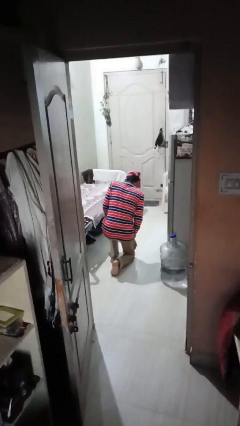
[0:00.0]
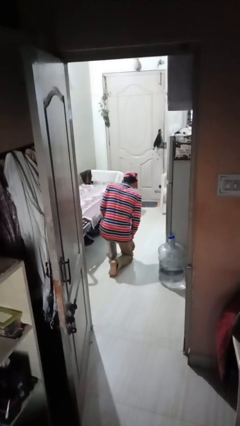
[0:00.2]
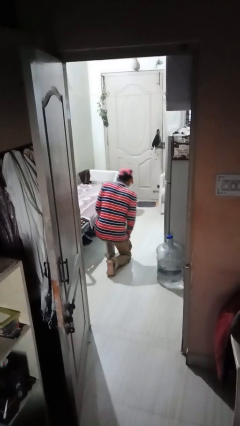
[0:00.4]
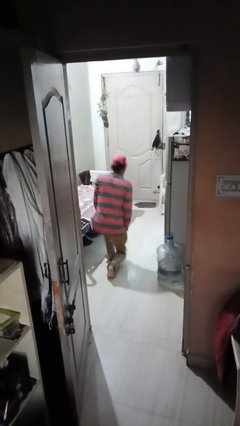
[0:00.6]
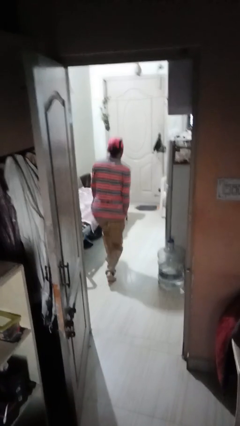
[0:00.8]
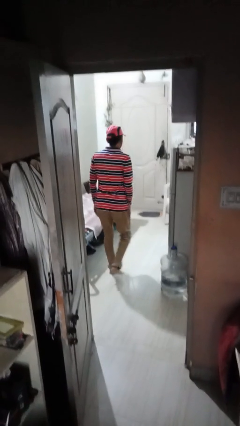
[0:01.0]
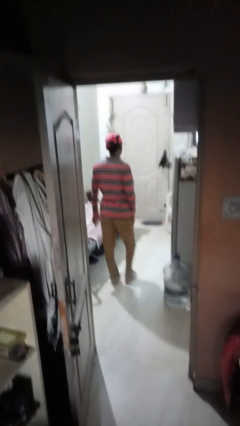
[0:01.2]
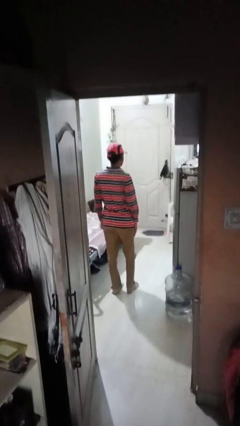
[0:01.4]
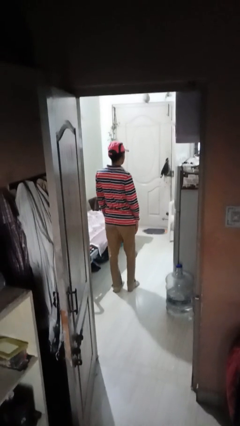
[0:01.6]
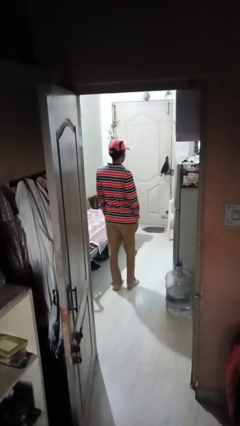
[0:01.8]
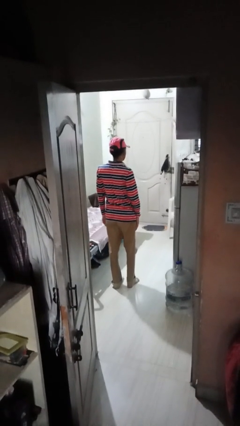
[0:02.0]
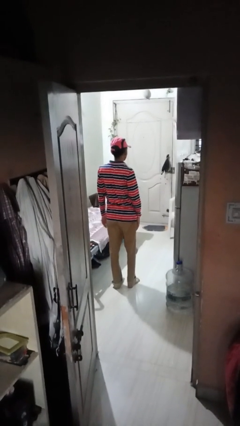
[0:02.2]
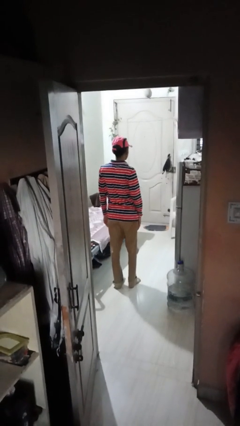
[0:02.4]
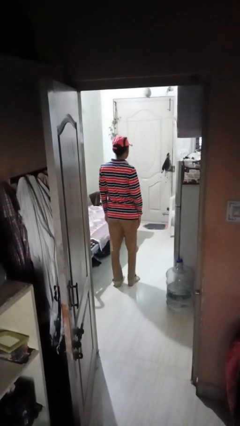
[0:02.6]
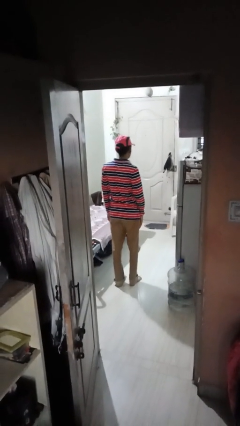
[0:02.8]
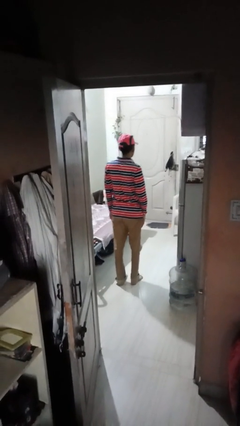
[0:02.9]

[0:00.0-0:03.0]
person stands up from floor

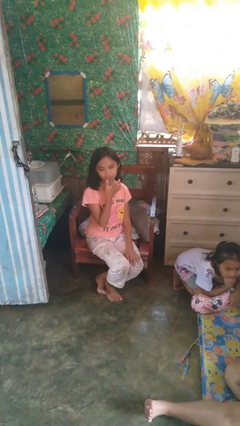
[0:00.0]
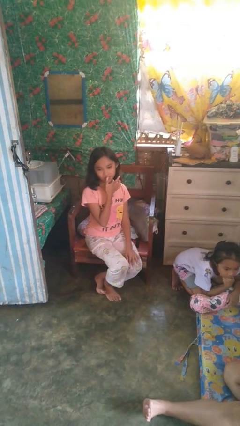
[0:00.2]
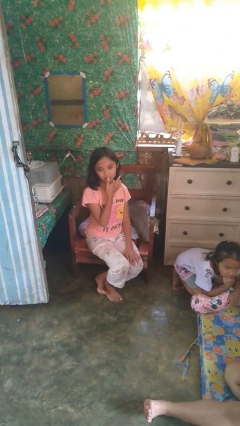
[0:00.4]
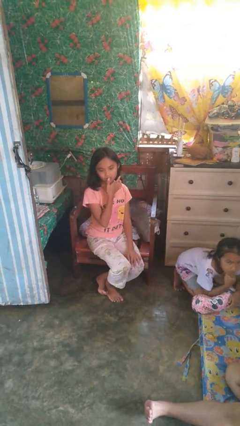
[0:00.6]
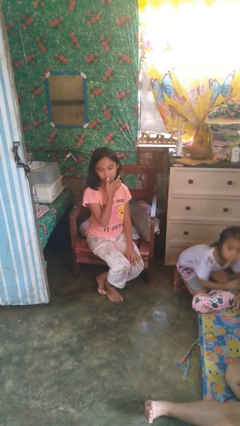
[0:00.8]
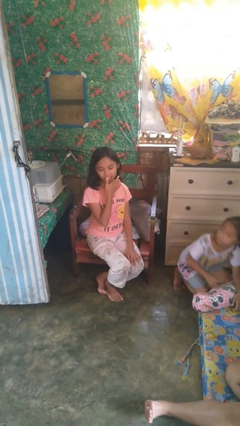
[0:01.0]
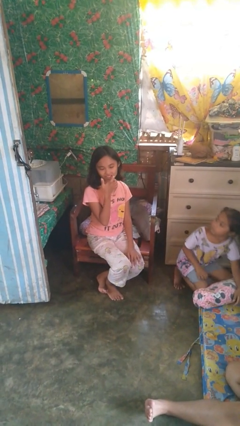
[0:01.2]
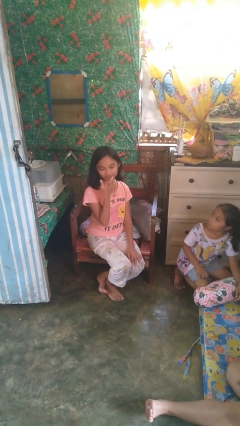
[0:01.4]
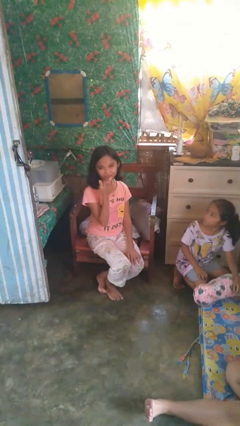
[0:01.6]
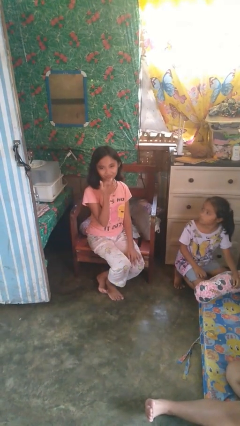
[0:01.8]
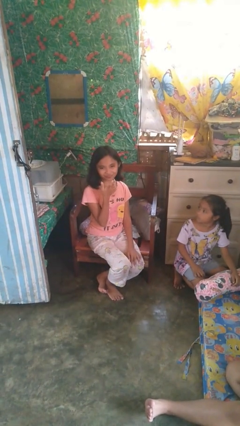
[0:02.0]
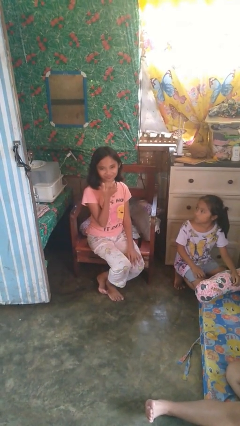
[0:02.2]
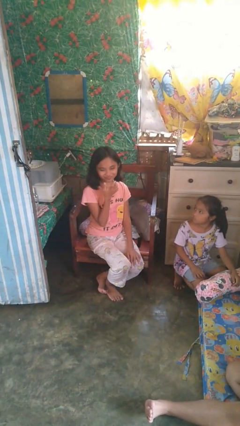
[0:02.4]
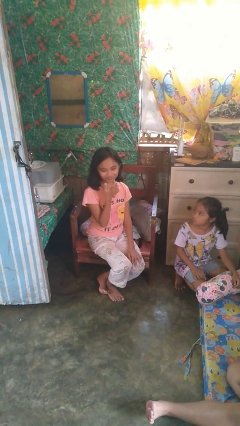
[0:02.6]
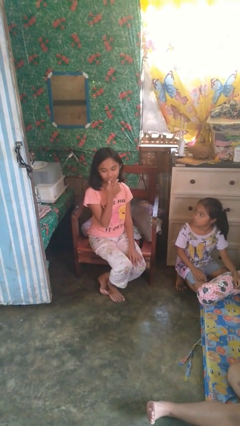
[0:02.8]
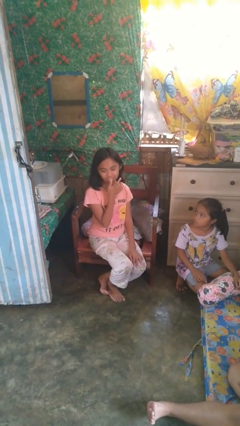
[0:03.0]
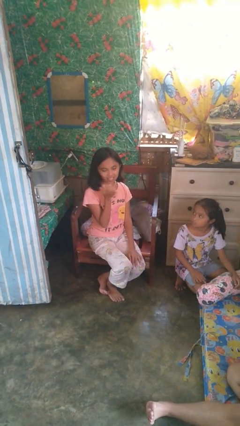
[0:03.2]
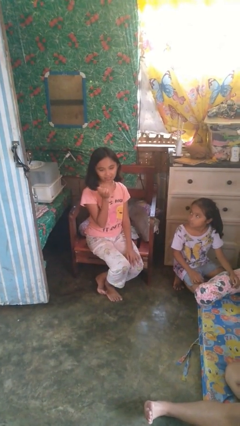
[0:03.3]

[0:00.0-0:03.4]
person licks fingers

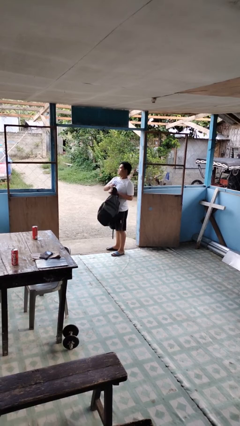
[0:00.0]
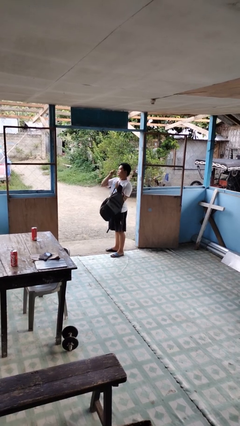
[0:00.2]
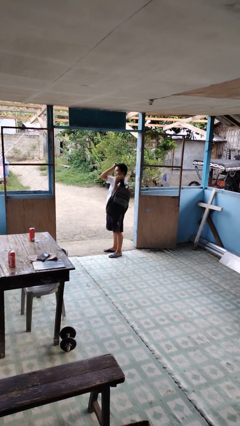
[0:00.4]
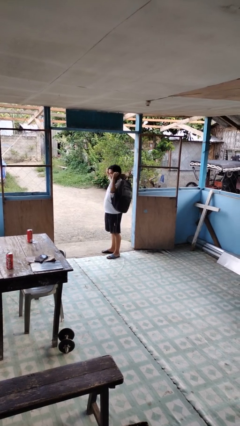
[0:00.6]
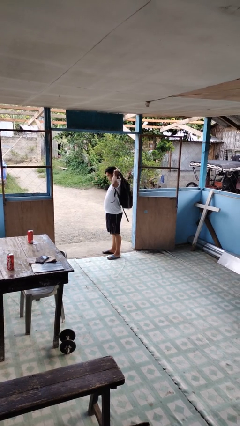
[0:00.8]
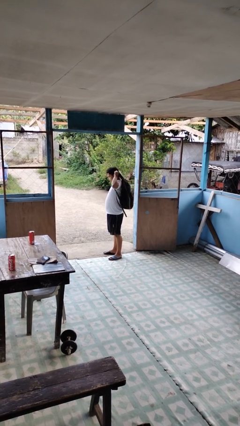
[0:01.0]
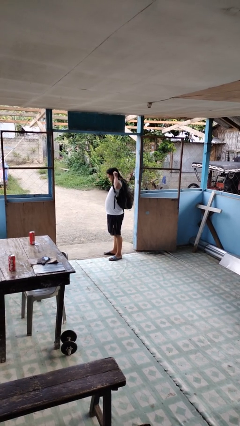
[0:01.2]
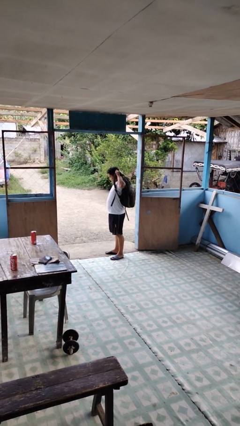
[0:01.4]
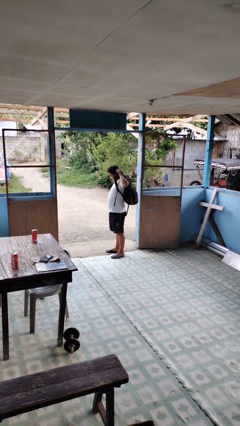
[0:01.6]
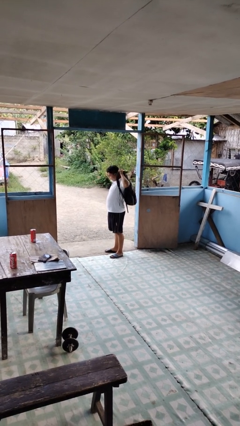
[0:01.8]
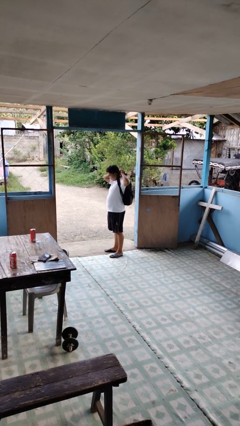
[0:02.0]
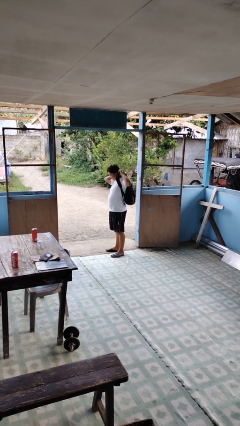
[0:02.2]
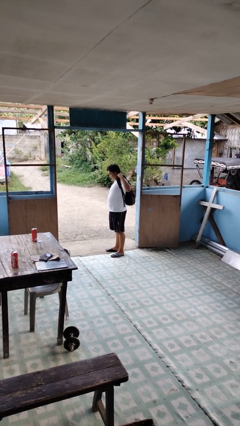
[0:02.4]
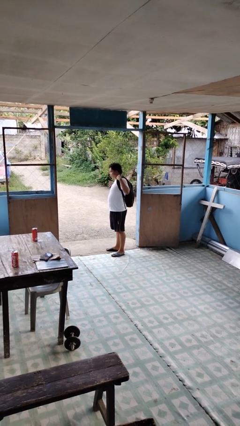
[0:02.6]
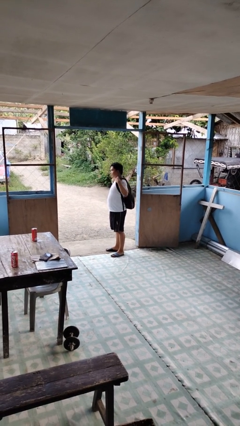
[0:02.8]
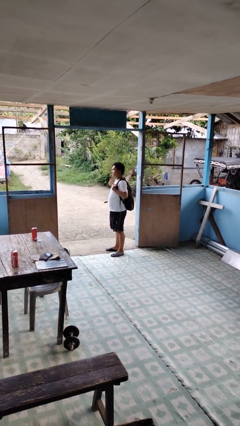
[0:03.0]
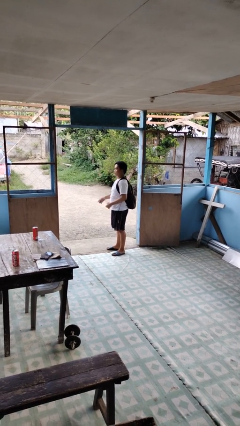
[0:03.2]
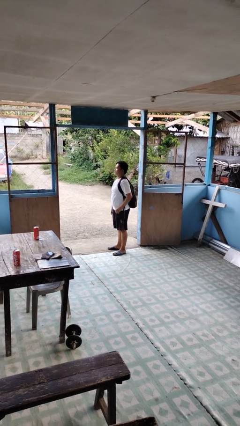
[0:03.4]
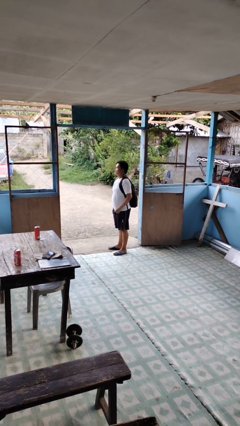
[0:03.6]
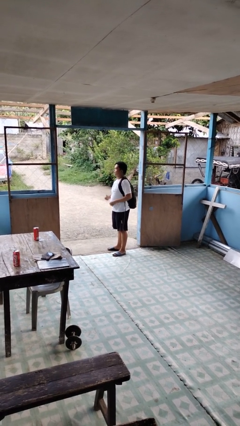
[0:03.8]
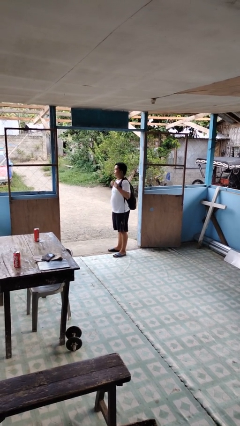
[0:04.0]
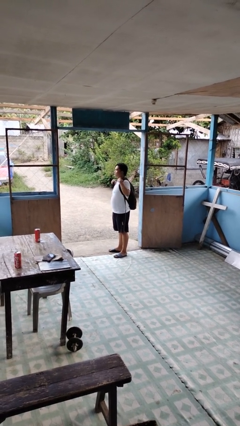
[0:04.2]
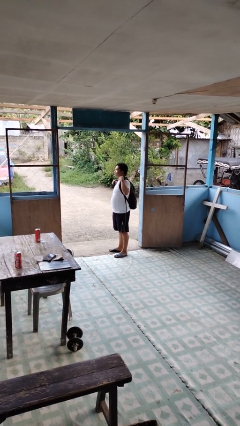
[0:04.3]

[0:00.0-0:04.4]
person puts on backpack

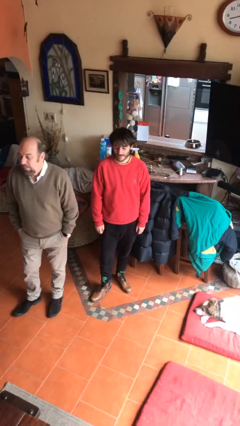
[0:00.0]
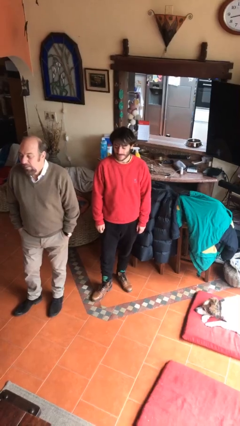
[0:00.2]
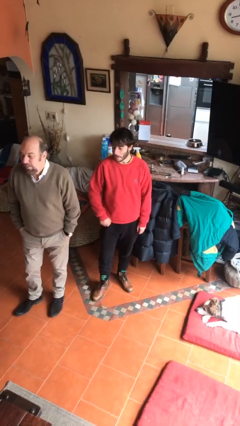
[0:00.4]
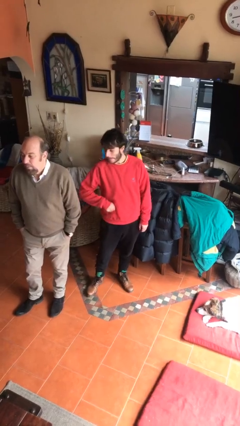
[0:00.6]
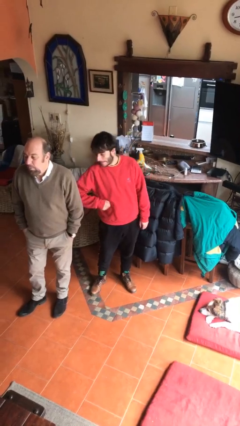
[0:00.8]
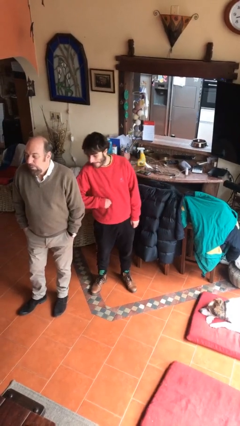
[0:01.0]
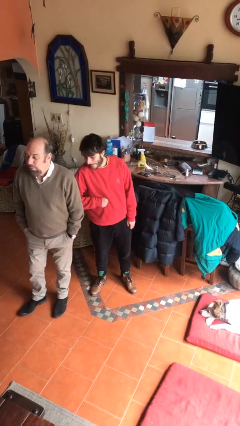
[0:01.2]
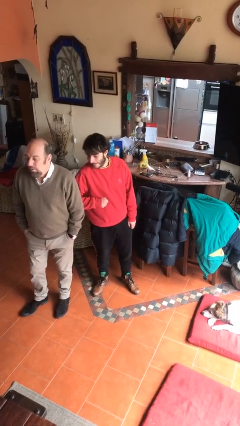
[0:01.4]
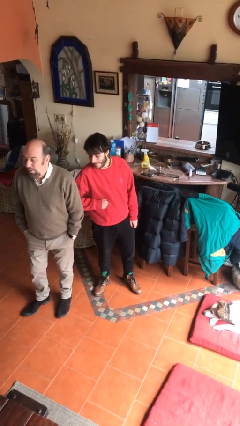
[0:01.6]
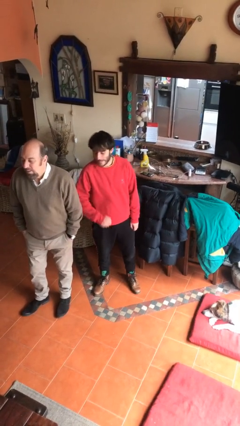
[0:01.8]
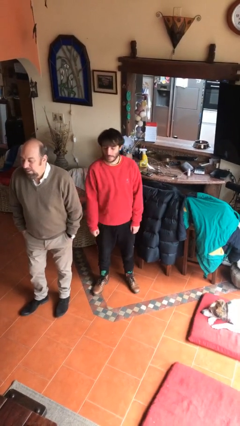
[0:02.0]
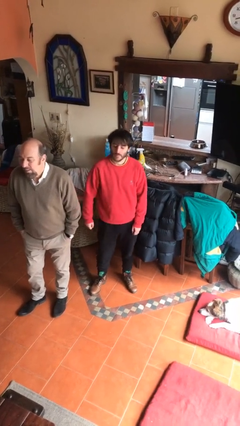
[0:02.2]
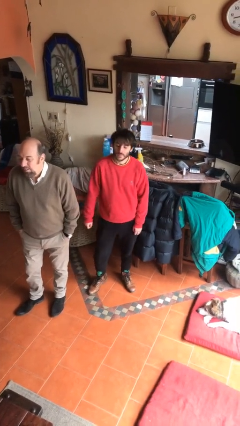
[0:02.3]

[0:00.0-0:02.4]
person nudges person with elbow

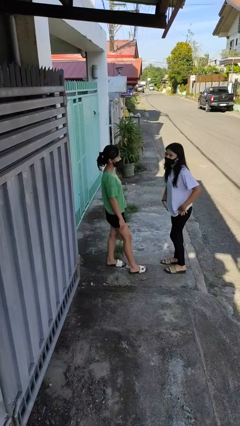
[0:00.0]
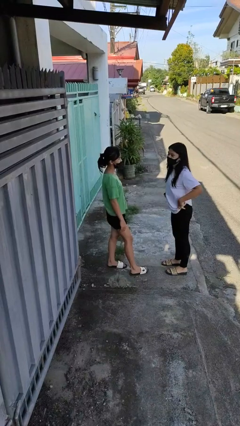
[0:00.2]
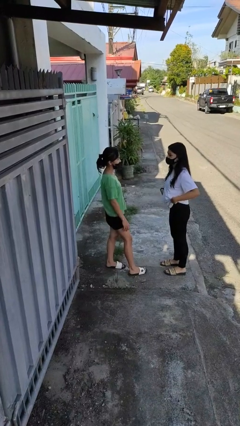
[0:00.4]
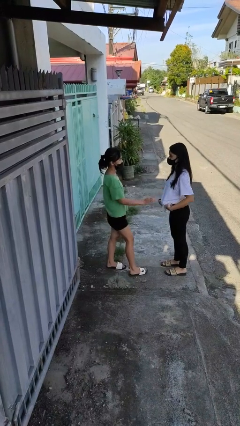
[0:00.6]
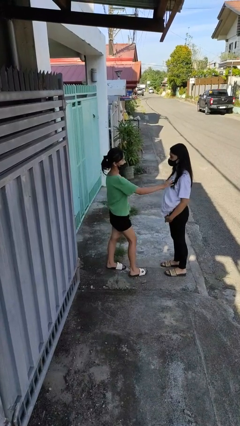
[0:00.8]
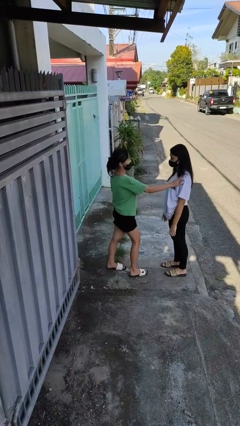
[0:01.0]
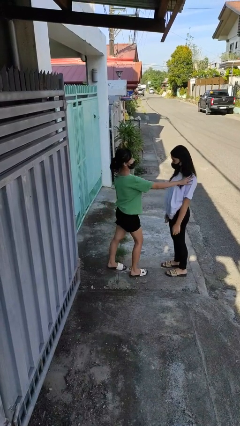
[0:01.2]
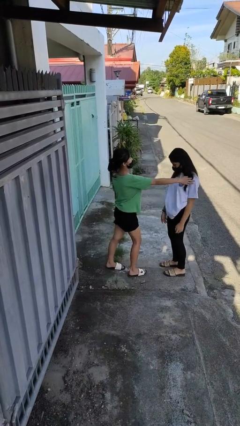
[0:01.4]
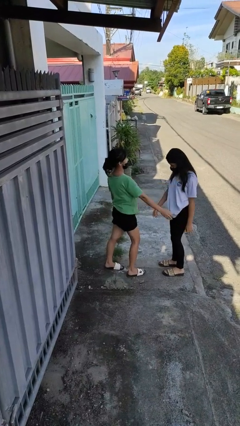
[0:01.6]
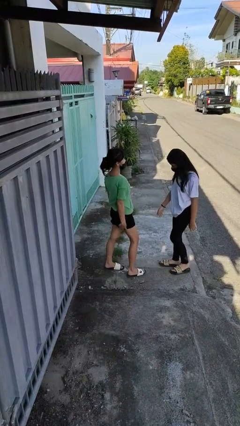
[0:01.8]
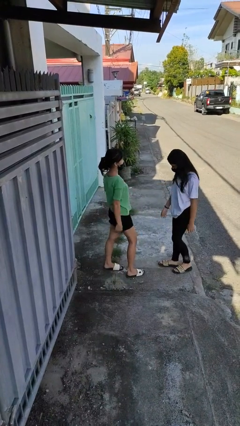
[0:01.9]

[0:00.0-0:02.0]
person shoves person

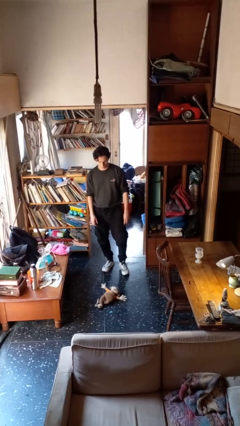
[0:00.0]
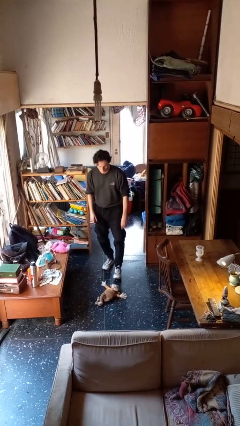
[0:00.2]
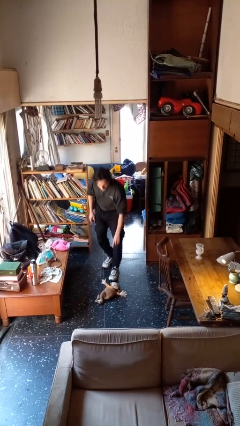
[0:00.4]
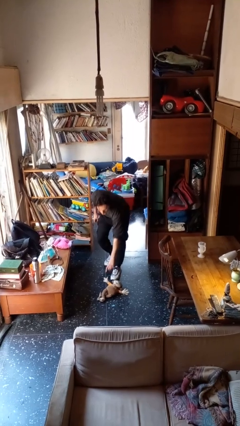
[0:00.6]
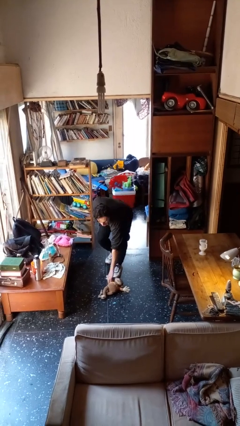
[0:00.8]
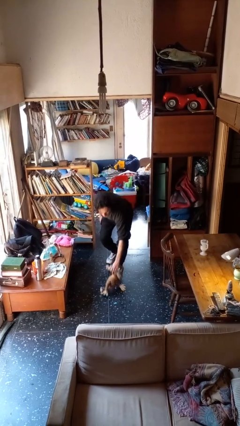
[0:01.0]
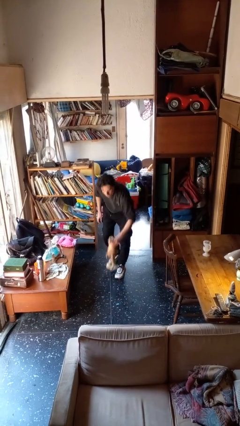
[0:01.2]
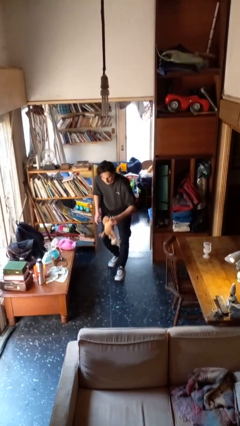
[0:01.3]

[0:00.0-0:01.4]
person picks up object from floor

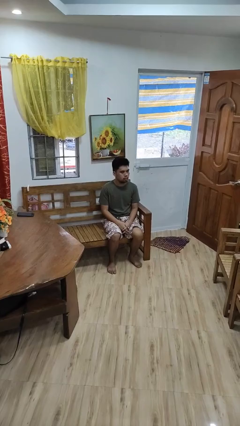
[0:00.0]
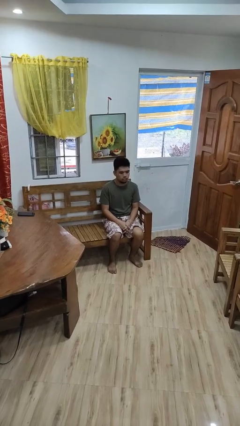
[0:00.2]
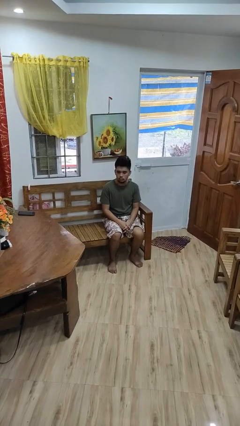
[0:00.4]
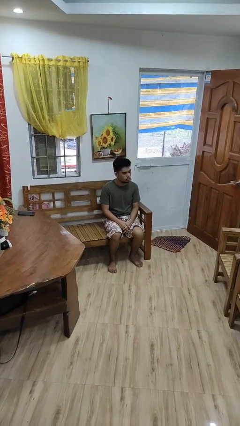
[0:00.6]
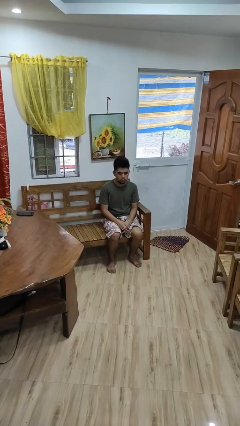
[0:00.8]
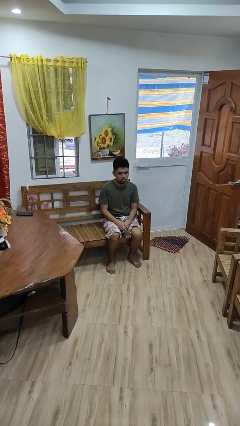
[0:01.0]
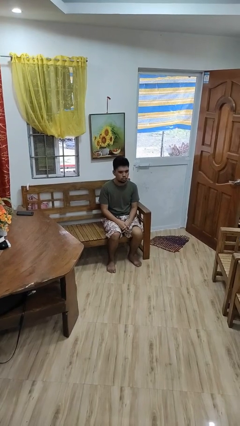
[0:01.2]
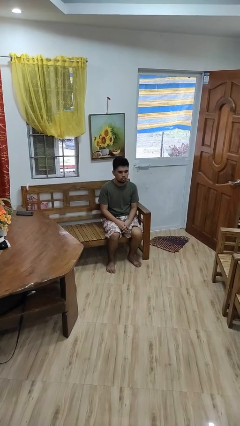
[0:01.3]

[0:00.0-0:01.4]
person shakes head
